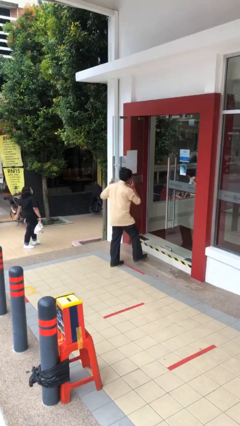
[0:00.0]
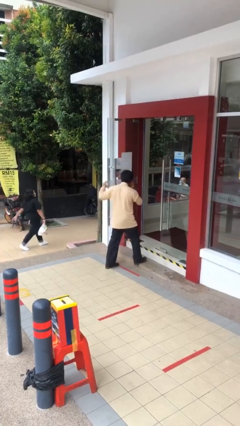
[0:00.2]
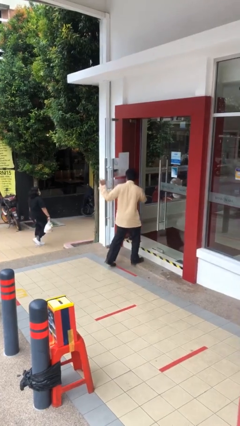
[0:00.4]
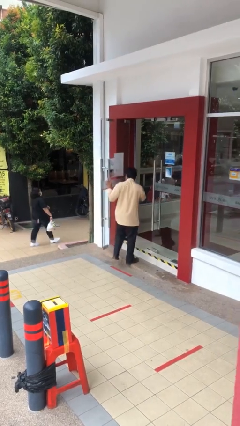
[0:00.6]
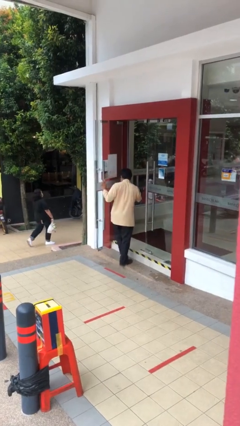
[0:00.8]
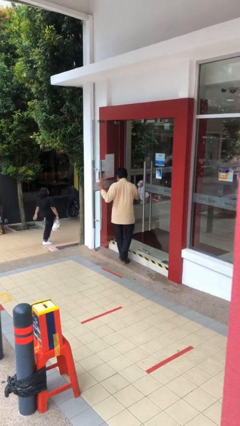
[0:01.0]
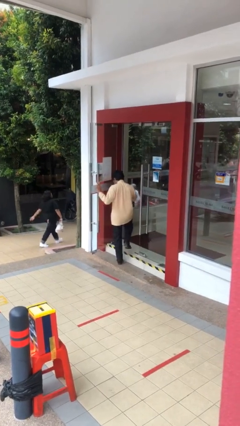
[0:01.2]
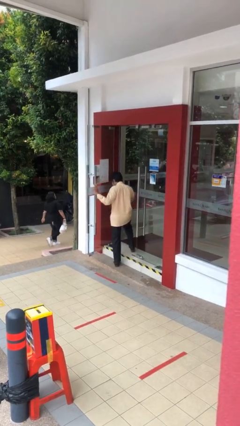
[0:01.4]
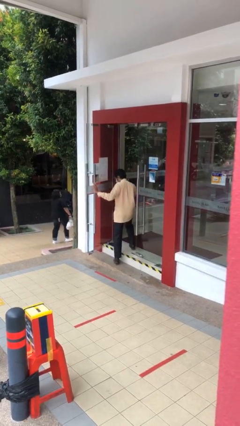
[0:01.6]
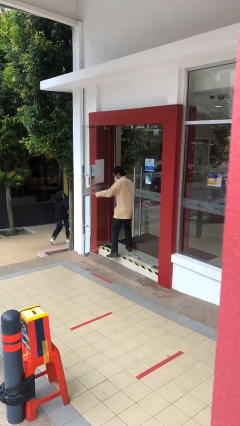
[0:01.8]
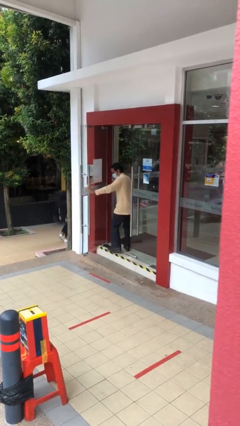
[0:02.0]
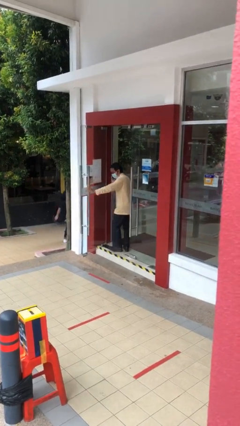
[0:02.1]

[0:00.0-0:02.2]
person exits scene through structure

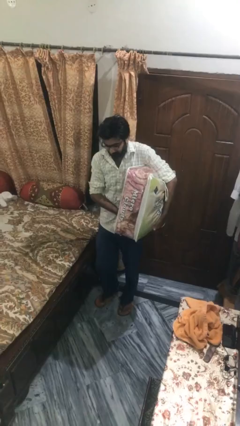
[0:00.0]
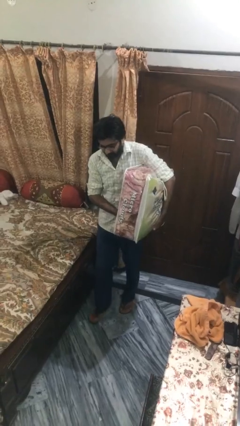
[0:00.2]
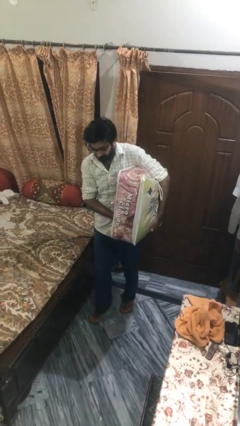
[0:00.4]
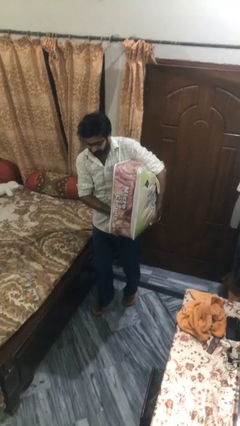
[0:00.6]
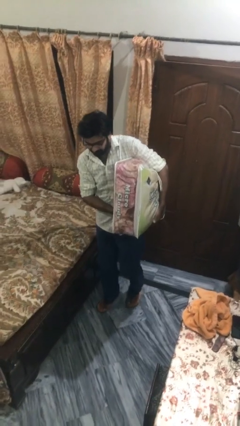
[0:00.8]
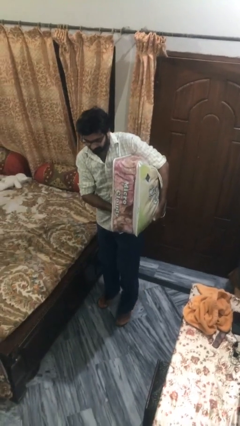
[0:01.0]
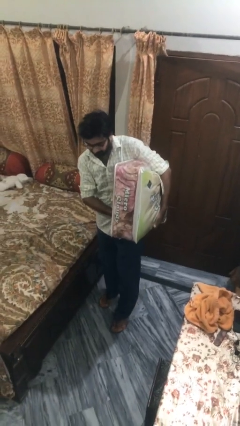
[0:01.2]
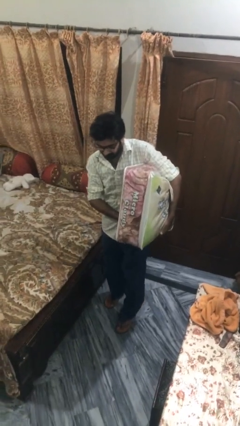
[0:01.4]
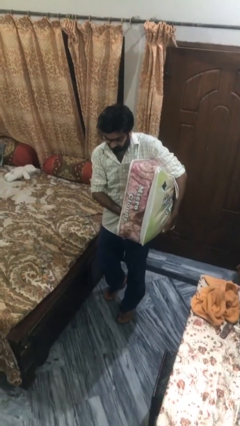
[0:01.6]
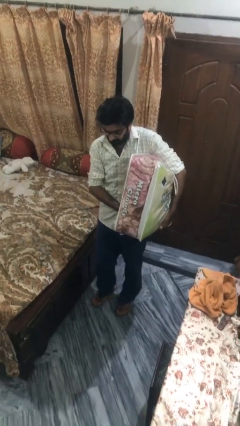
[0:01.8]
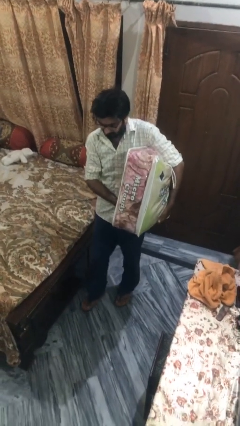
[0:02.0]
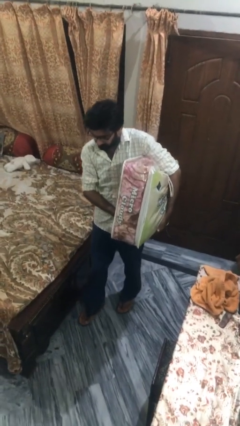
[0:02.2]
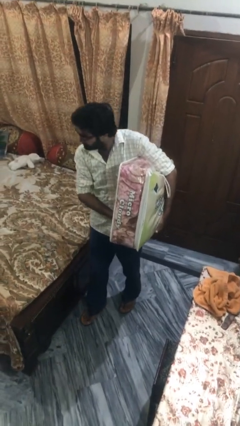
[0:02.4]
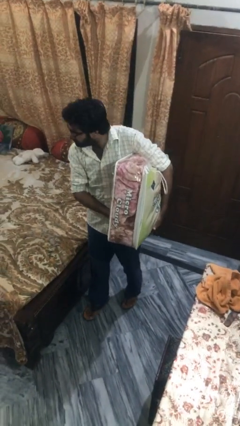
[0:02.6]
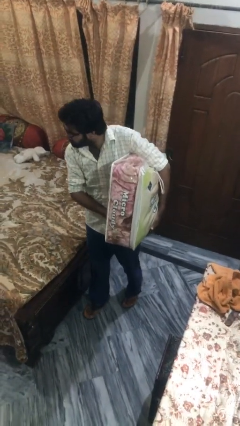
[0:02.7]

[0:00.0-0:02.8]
person carries heavy object

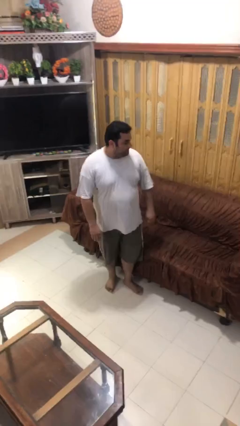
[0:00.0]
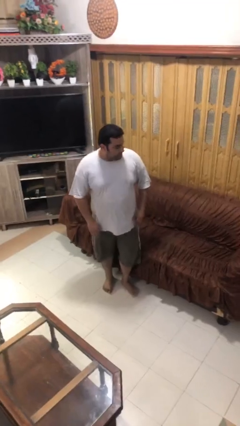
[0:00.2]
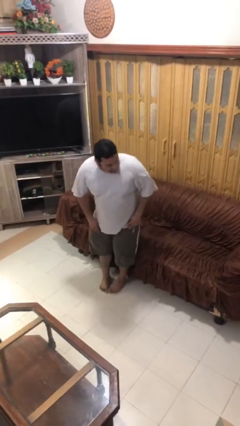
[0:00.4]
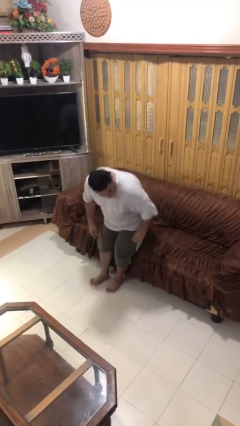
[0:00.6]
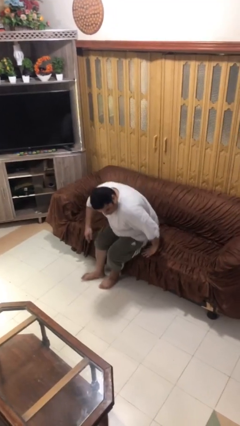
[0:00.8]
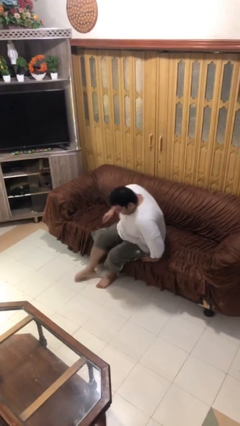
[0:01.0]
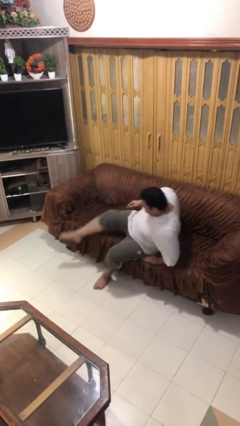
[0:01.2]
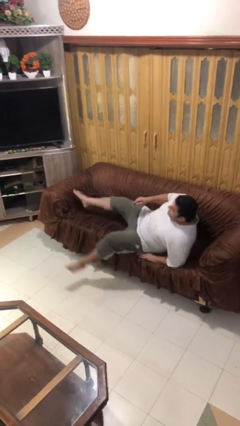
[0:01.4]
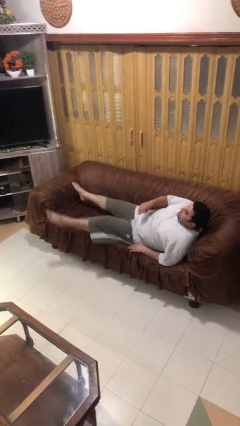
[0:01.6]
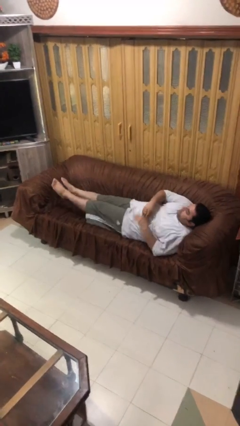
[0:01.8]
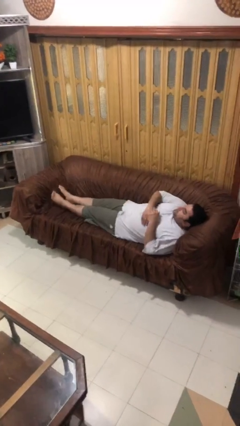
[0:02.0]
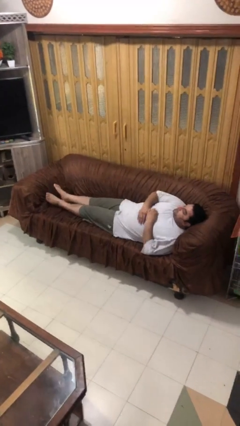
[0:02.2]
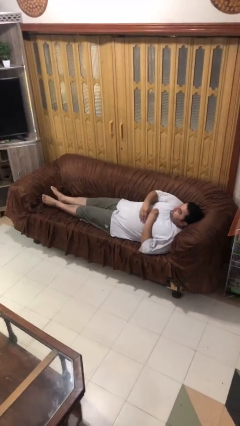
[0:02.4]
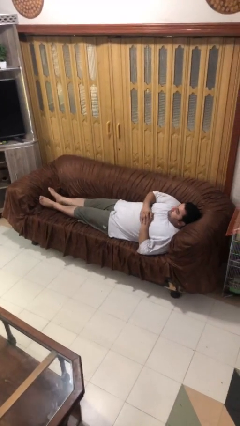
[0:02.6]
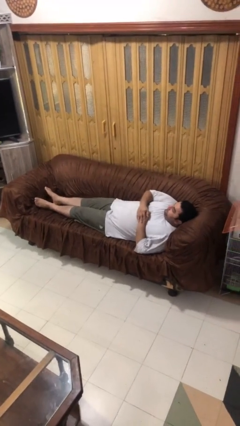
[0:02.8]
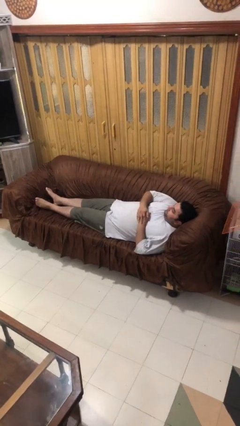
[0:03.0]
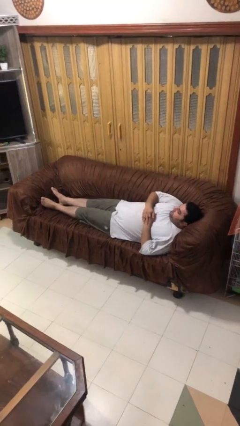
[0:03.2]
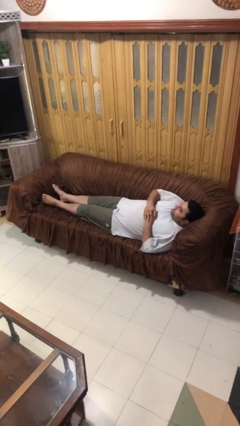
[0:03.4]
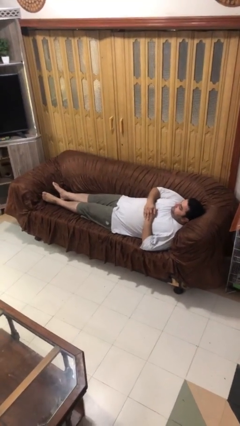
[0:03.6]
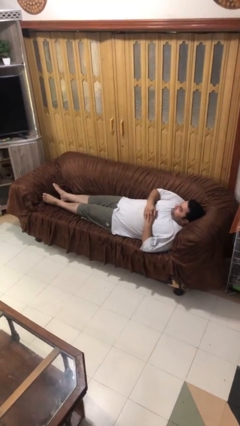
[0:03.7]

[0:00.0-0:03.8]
person lies down on couch

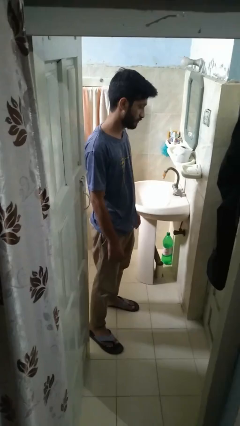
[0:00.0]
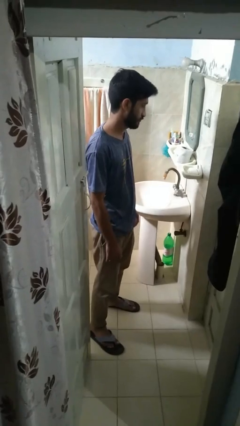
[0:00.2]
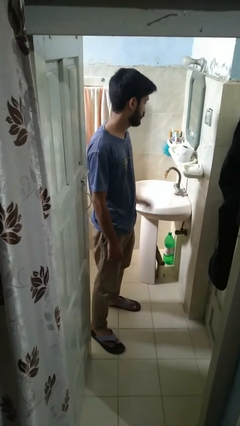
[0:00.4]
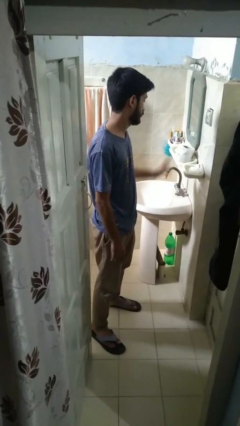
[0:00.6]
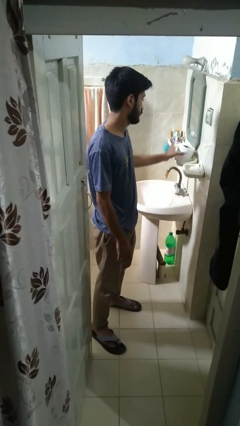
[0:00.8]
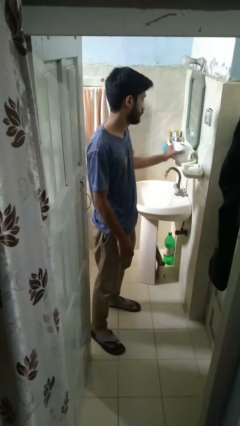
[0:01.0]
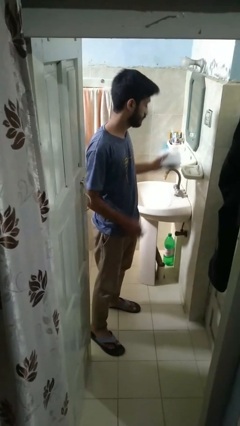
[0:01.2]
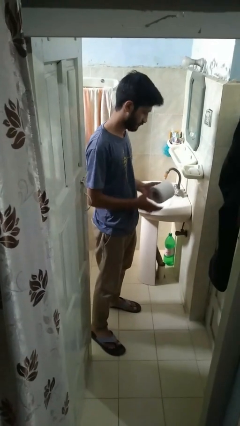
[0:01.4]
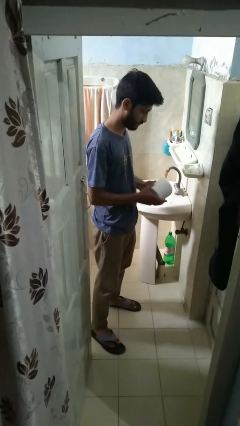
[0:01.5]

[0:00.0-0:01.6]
person picks up object from countertop

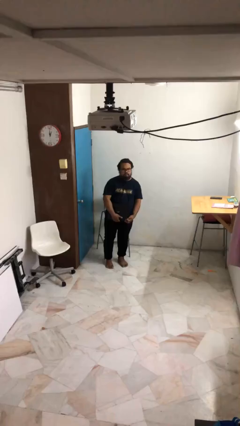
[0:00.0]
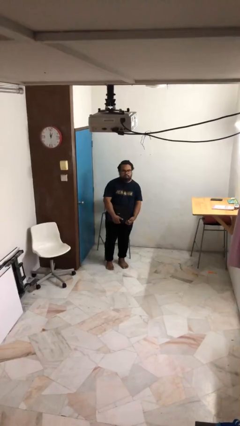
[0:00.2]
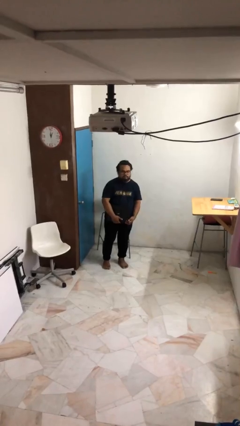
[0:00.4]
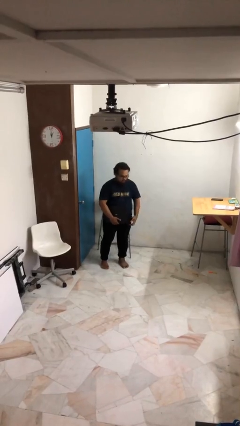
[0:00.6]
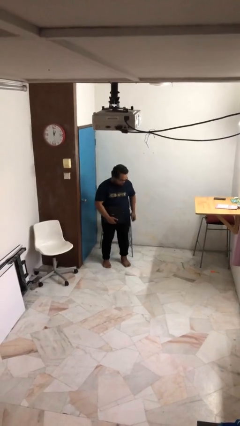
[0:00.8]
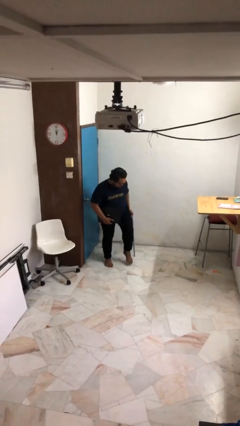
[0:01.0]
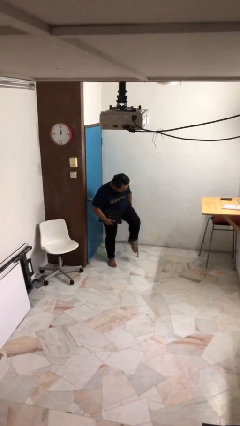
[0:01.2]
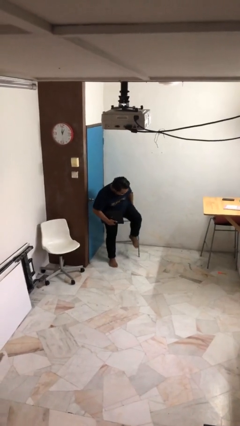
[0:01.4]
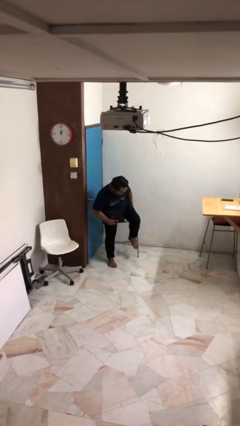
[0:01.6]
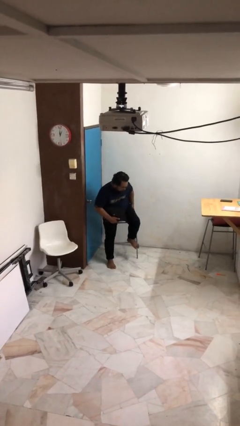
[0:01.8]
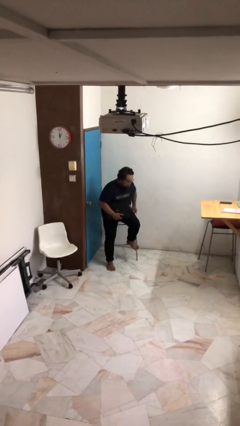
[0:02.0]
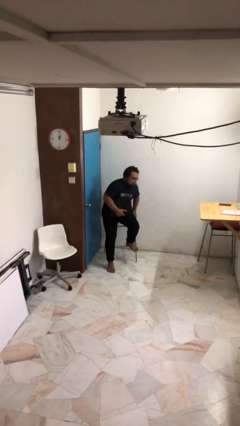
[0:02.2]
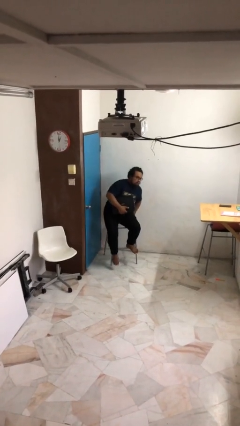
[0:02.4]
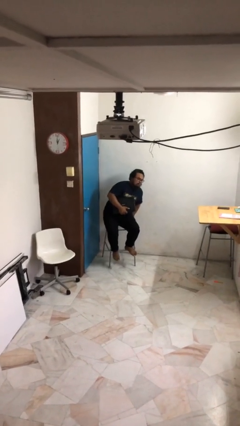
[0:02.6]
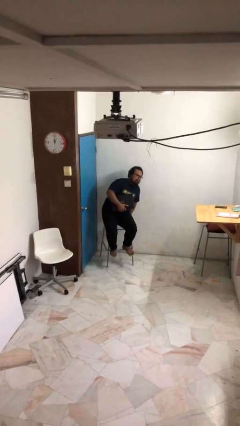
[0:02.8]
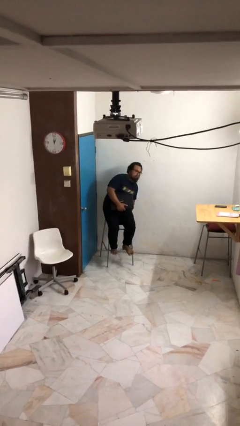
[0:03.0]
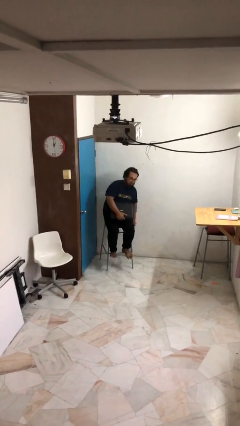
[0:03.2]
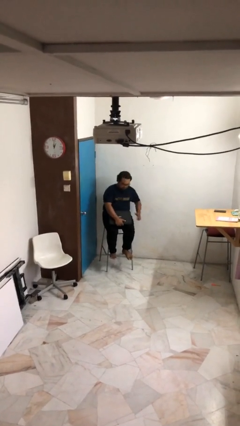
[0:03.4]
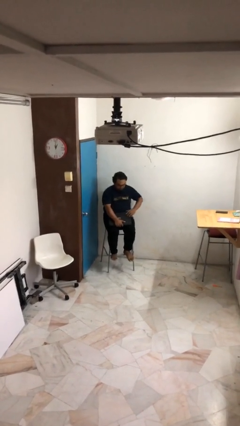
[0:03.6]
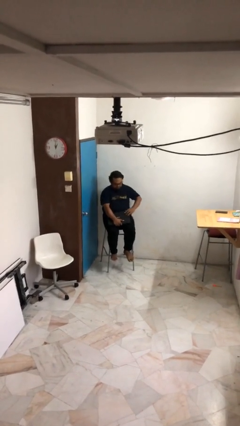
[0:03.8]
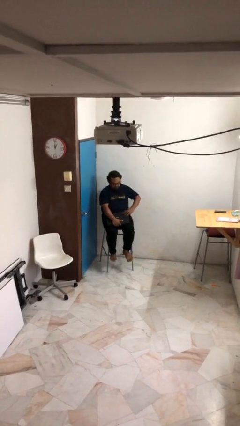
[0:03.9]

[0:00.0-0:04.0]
person sits down

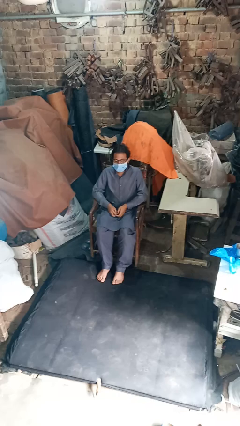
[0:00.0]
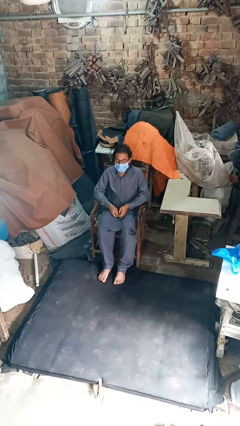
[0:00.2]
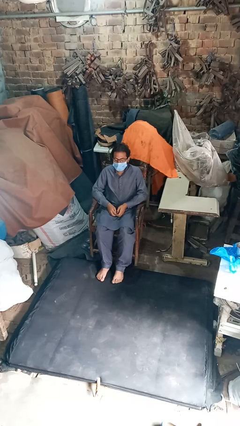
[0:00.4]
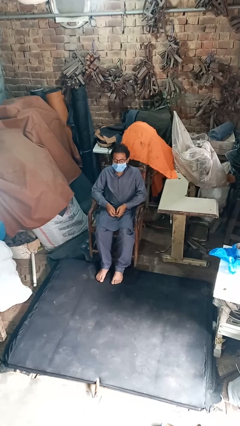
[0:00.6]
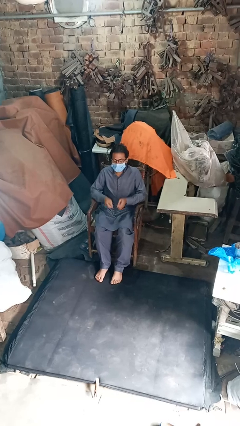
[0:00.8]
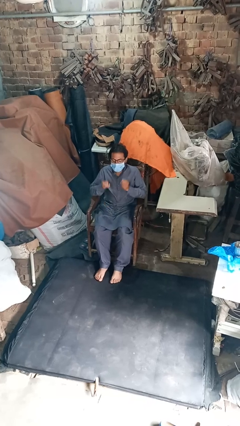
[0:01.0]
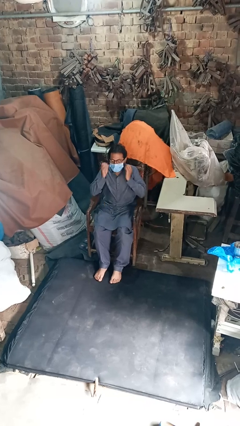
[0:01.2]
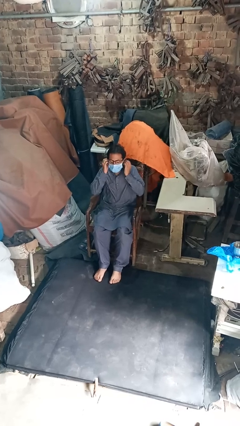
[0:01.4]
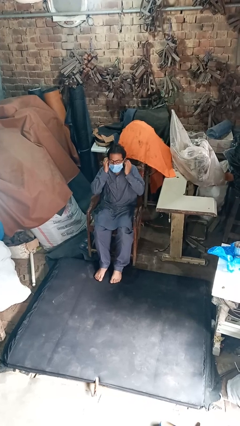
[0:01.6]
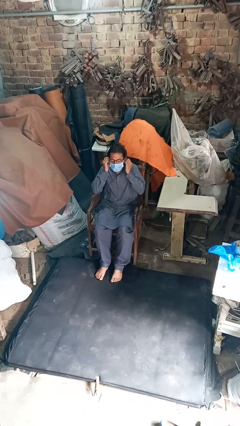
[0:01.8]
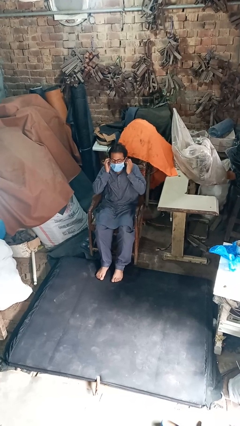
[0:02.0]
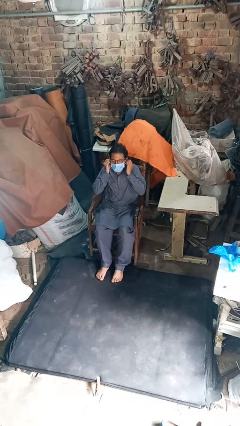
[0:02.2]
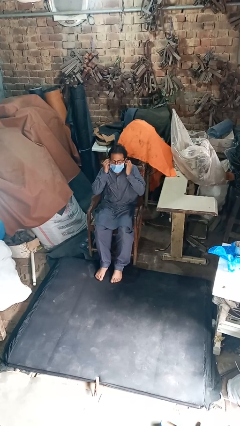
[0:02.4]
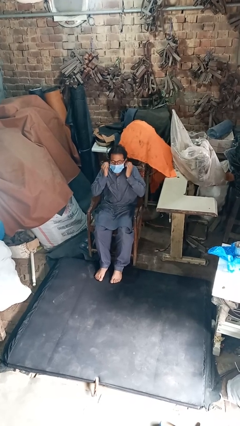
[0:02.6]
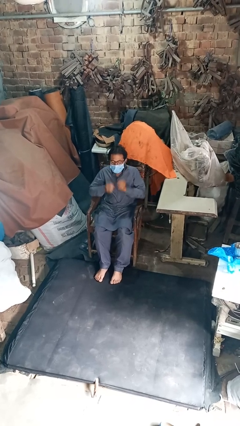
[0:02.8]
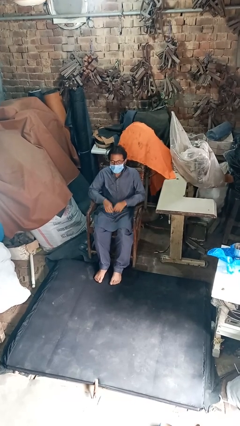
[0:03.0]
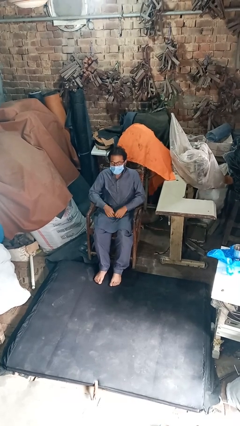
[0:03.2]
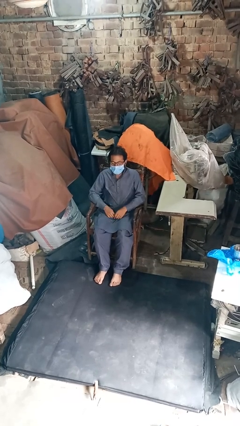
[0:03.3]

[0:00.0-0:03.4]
person puts on headphones
